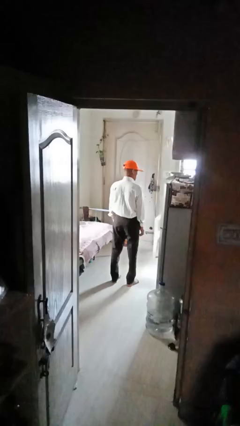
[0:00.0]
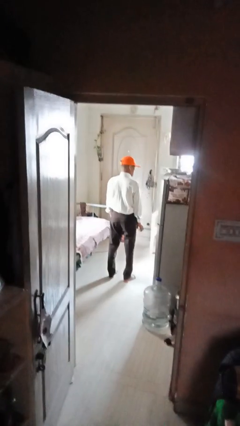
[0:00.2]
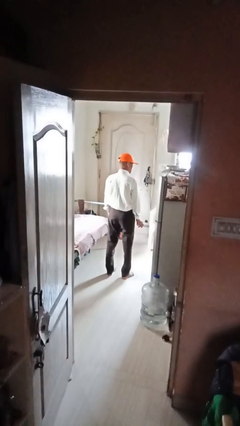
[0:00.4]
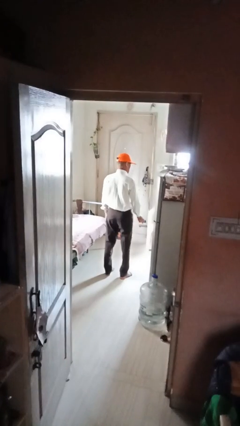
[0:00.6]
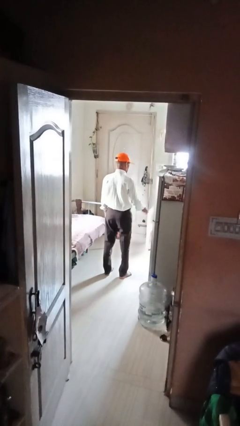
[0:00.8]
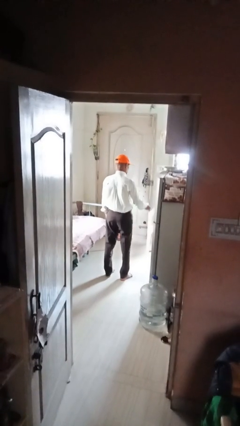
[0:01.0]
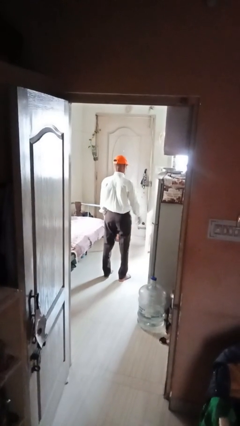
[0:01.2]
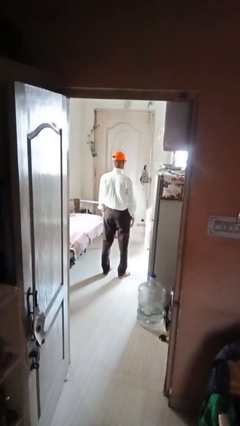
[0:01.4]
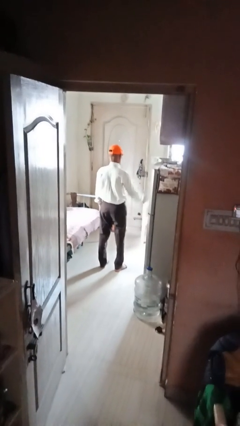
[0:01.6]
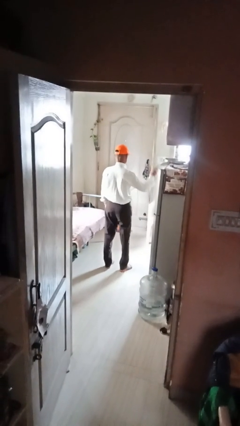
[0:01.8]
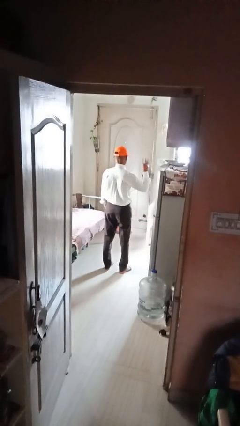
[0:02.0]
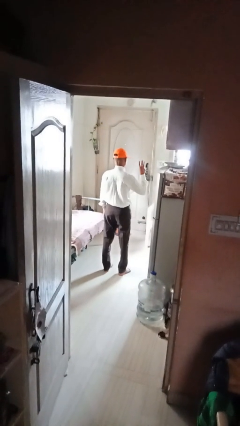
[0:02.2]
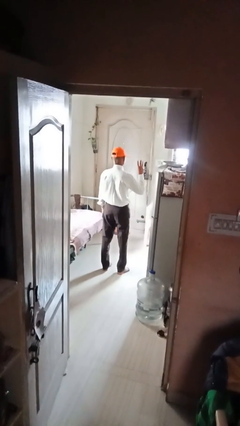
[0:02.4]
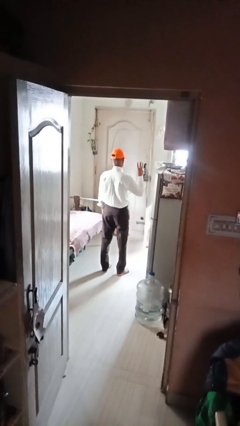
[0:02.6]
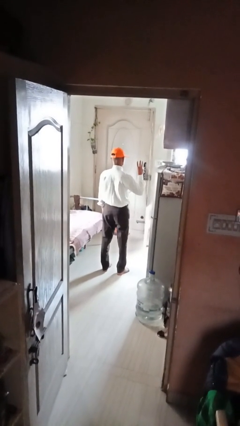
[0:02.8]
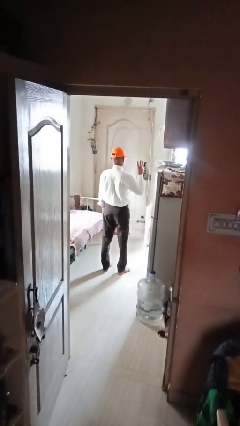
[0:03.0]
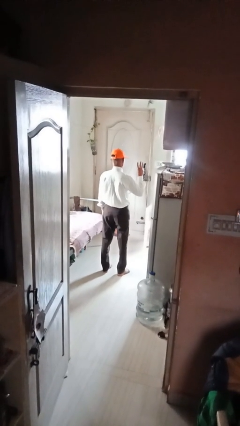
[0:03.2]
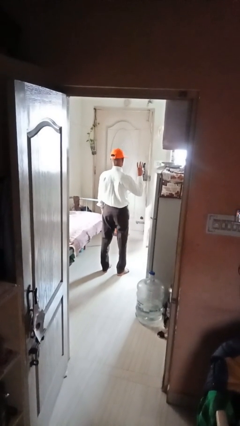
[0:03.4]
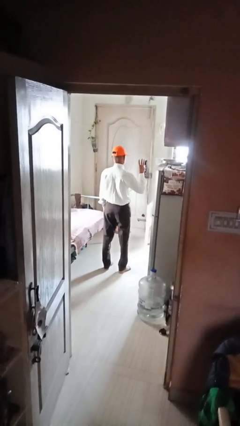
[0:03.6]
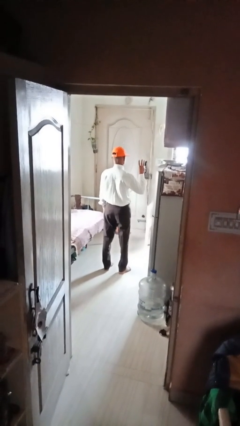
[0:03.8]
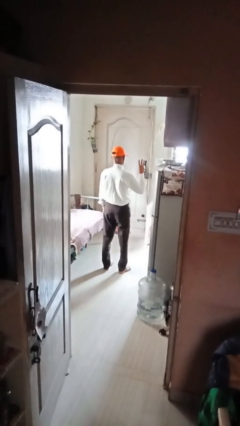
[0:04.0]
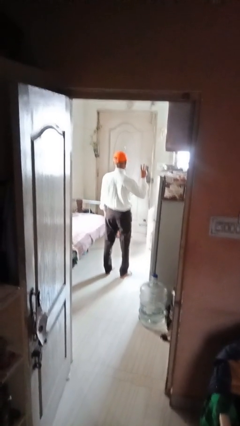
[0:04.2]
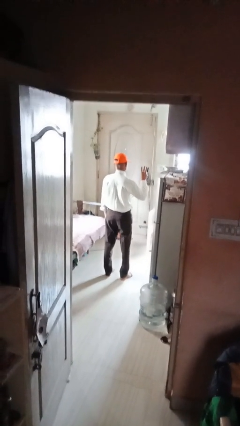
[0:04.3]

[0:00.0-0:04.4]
person gestures number three

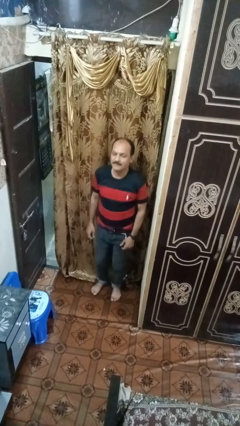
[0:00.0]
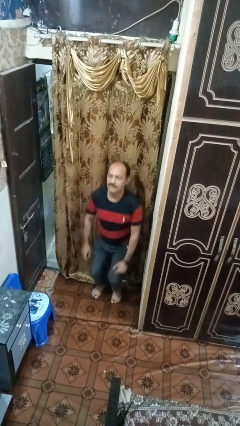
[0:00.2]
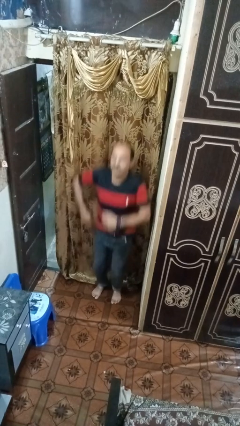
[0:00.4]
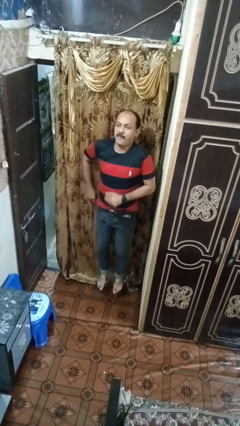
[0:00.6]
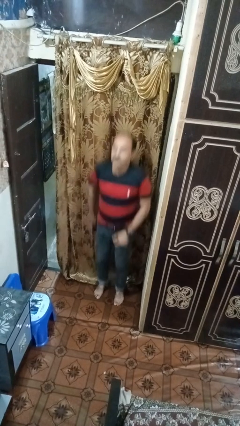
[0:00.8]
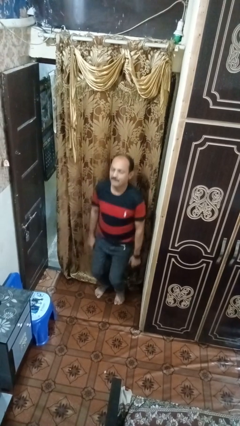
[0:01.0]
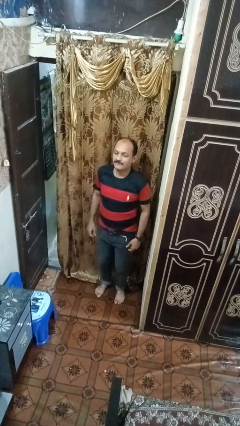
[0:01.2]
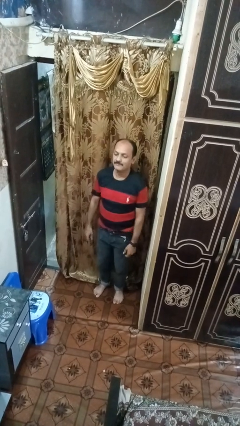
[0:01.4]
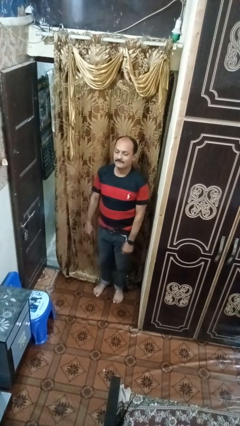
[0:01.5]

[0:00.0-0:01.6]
person jumps

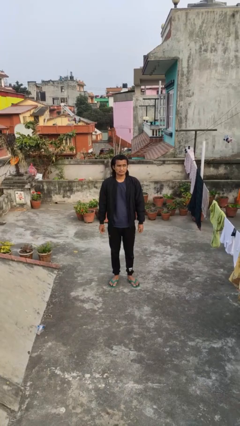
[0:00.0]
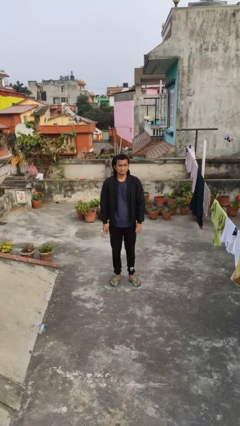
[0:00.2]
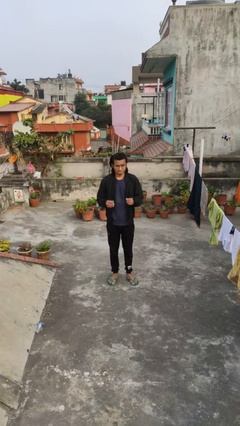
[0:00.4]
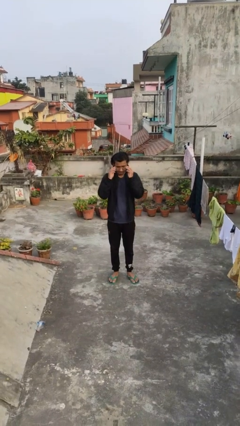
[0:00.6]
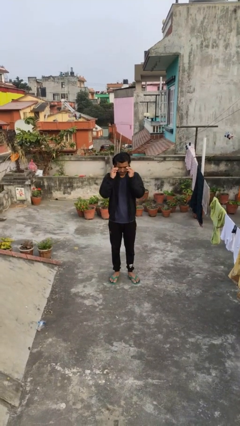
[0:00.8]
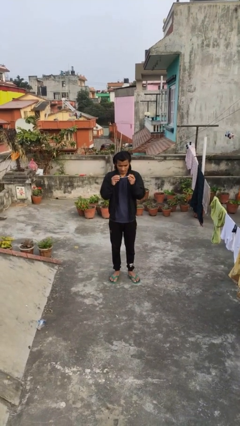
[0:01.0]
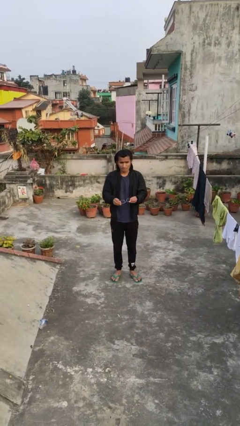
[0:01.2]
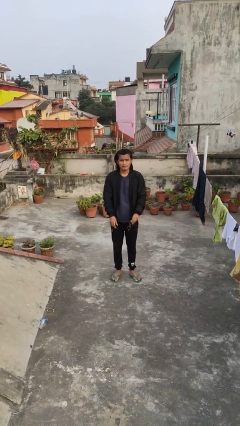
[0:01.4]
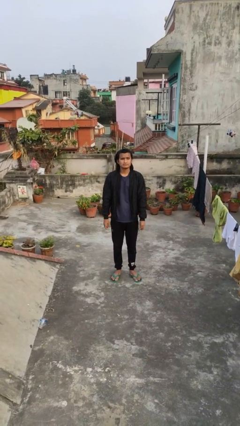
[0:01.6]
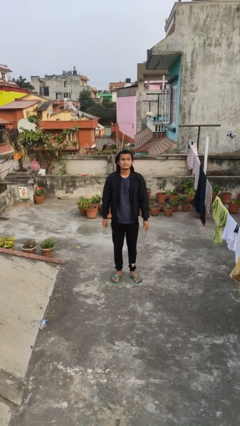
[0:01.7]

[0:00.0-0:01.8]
person takes off glasses

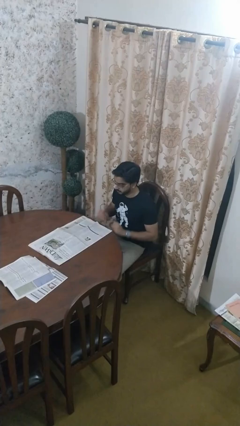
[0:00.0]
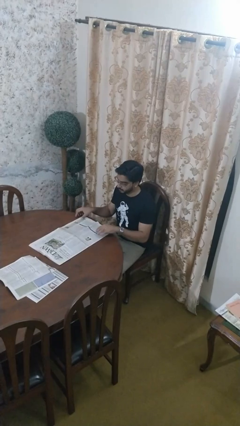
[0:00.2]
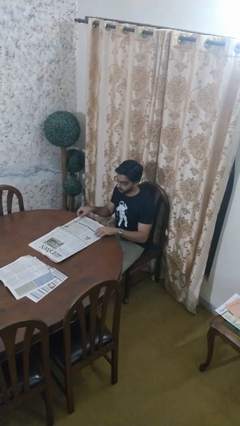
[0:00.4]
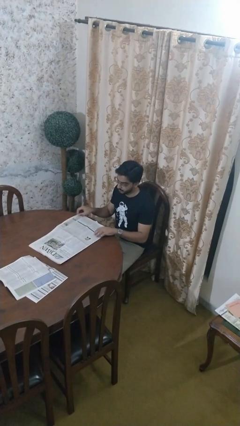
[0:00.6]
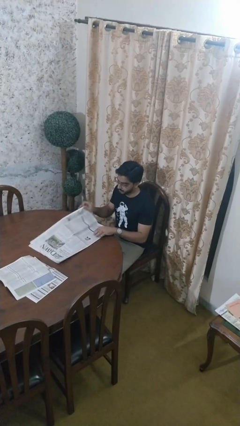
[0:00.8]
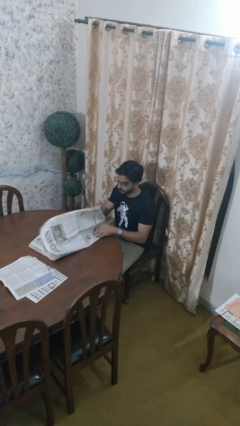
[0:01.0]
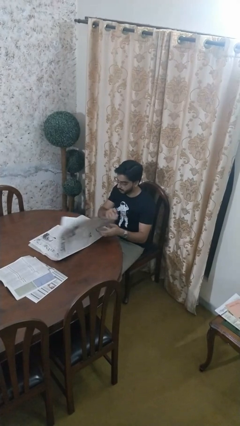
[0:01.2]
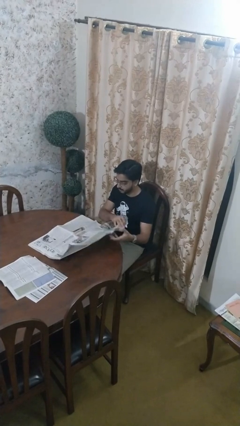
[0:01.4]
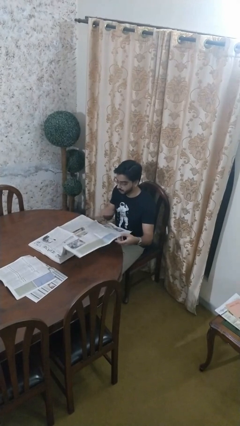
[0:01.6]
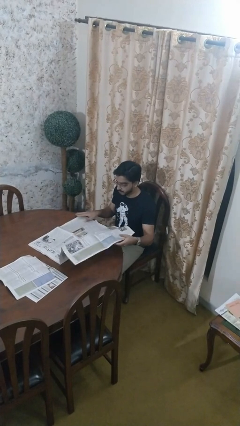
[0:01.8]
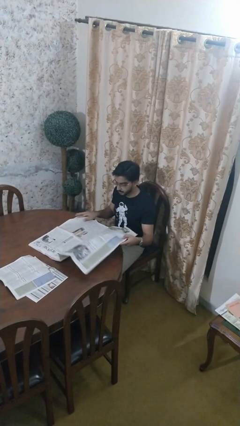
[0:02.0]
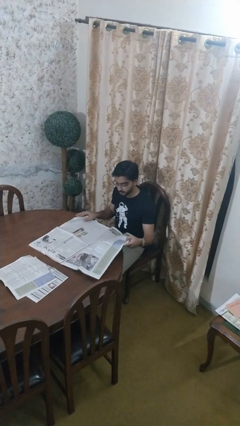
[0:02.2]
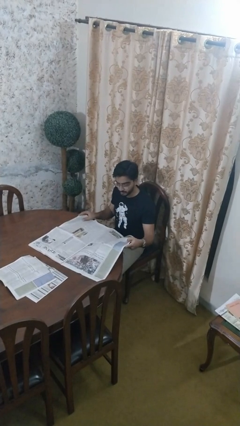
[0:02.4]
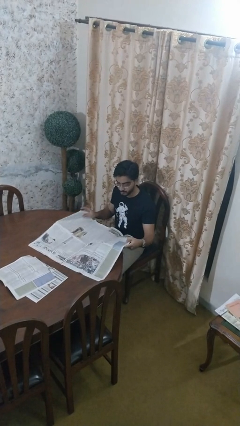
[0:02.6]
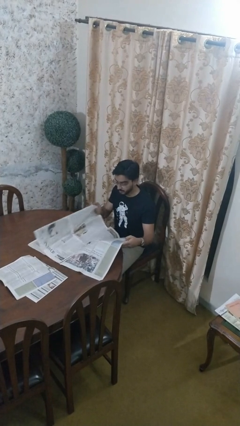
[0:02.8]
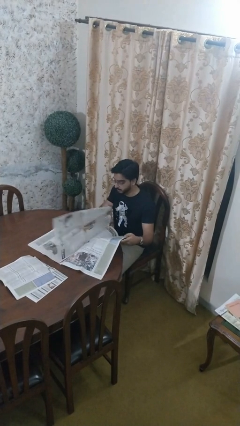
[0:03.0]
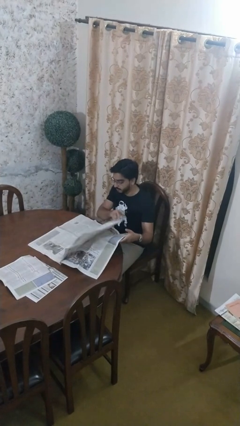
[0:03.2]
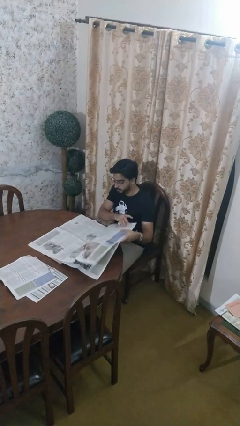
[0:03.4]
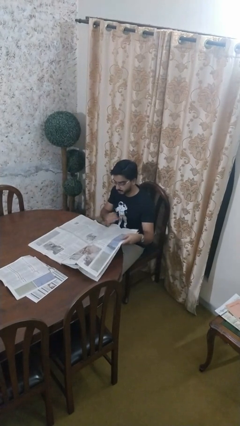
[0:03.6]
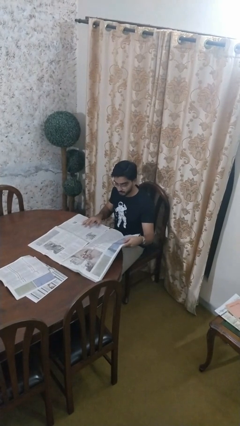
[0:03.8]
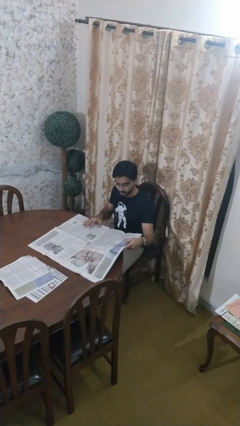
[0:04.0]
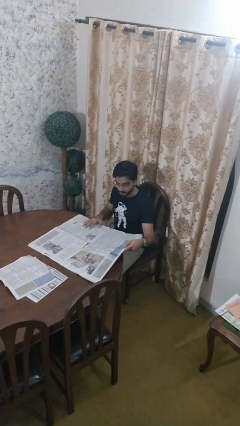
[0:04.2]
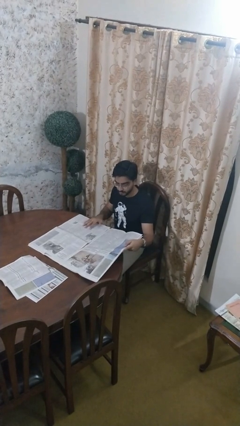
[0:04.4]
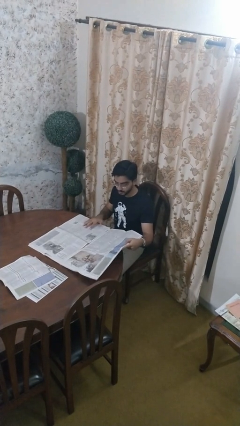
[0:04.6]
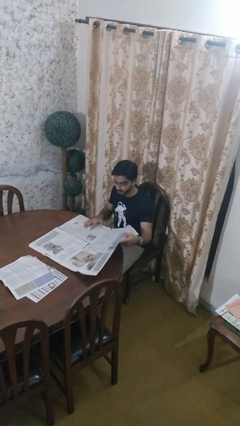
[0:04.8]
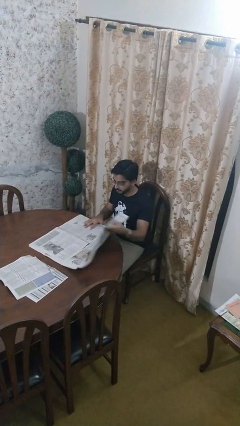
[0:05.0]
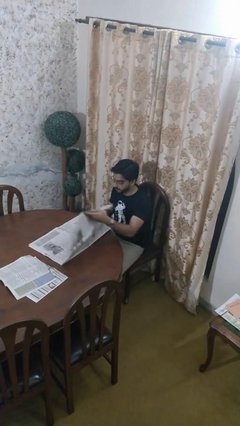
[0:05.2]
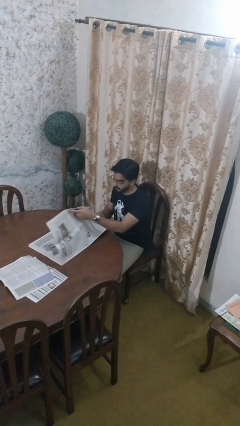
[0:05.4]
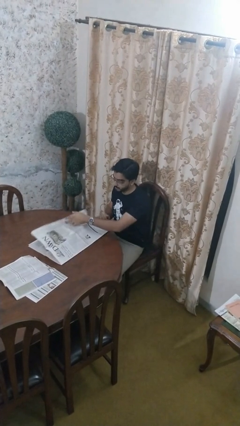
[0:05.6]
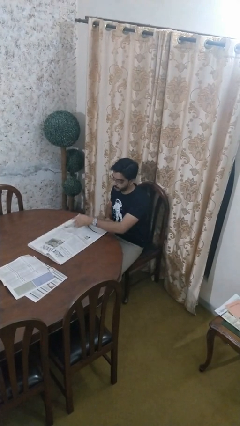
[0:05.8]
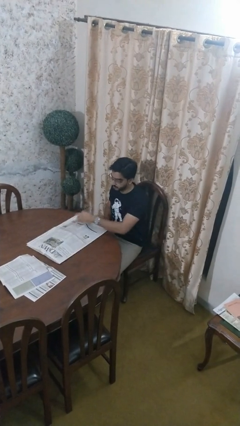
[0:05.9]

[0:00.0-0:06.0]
person reads newspaper

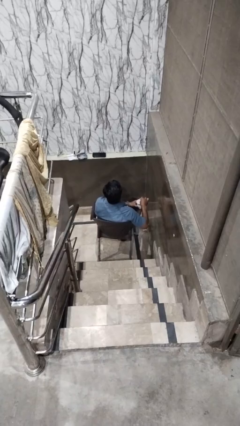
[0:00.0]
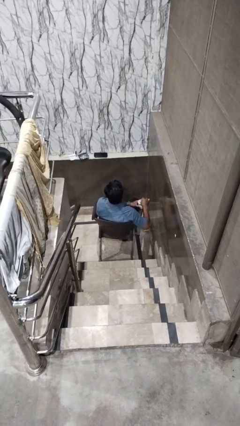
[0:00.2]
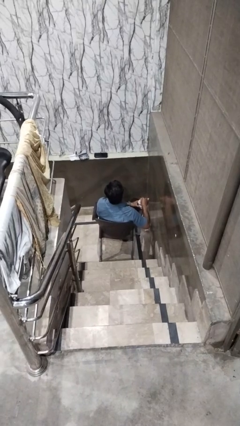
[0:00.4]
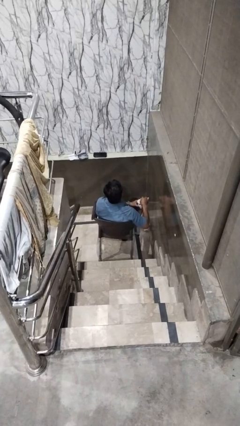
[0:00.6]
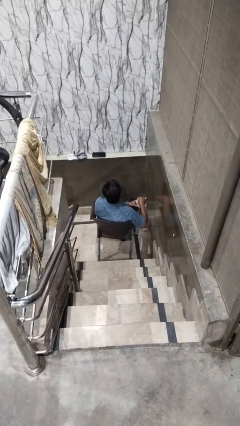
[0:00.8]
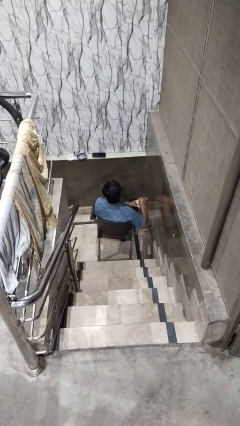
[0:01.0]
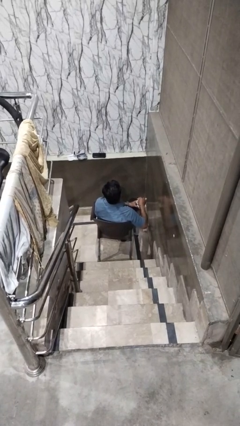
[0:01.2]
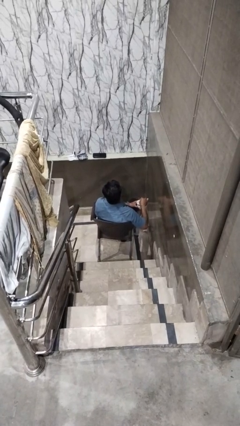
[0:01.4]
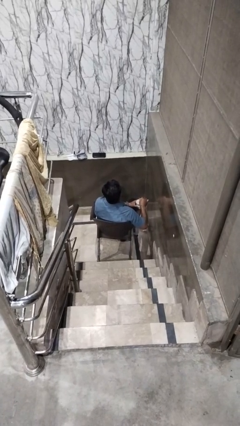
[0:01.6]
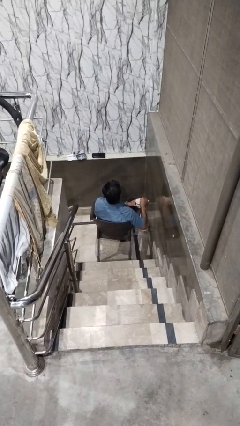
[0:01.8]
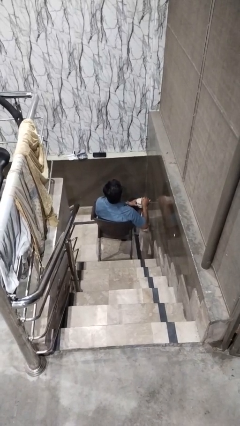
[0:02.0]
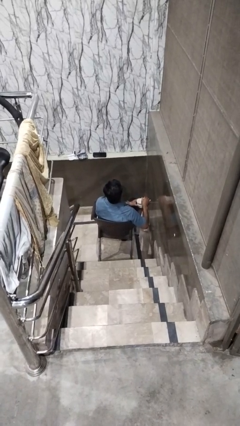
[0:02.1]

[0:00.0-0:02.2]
person stirs mug

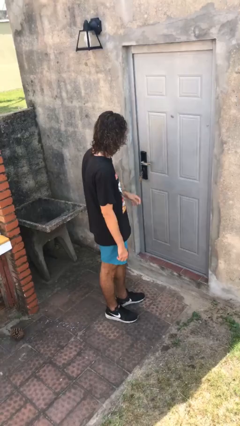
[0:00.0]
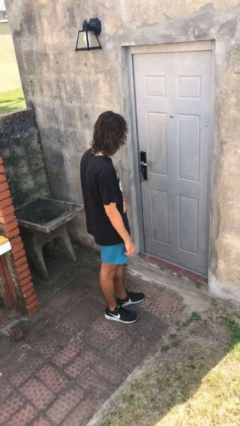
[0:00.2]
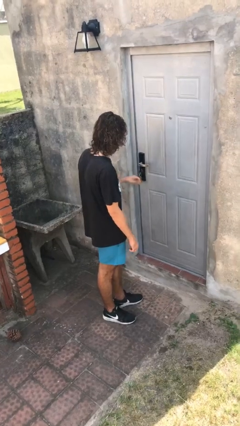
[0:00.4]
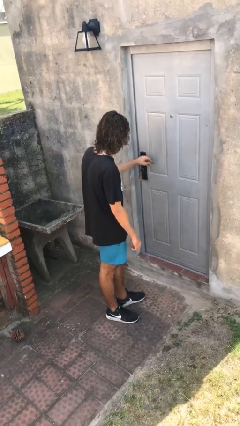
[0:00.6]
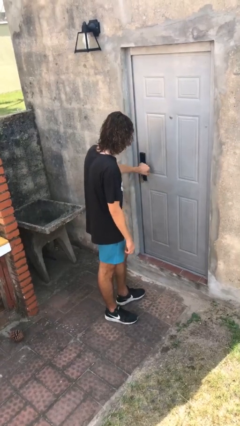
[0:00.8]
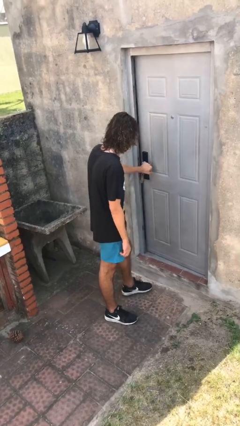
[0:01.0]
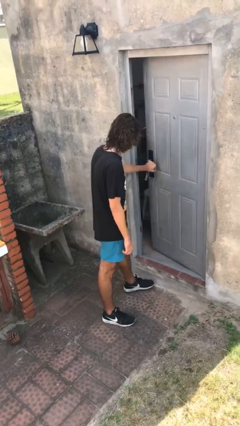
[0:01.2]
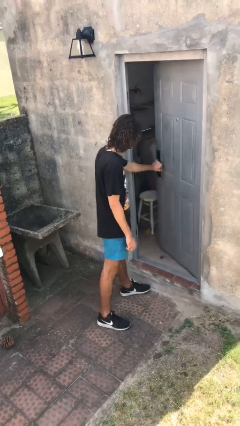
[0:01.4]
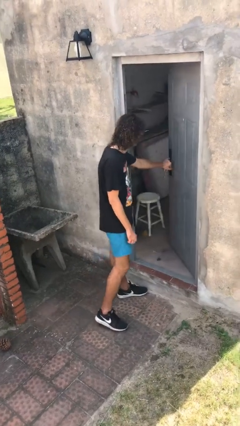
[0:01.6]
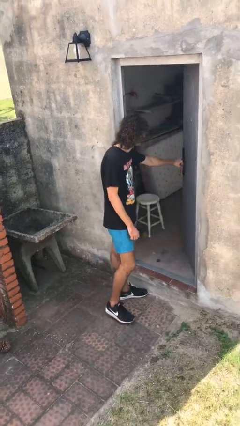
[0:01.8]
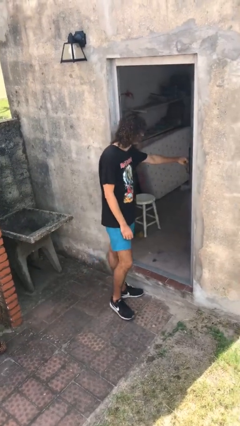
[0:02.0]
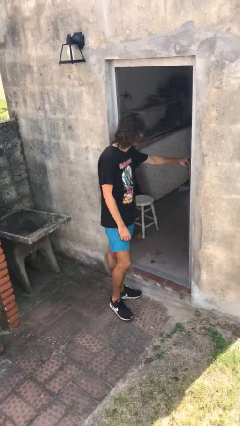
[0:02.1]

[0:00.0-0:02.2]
person opens facility door
